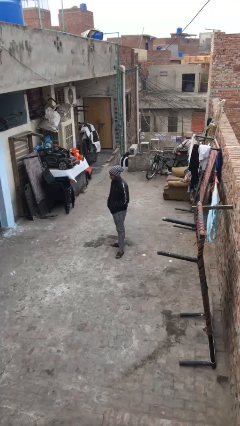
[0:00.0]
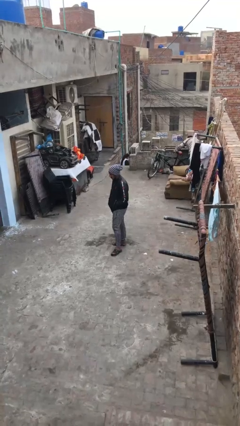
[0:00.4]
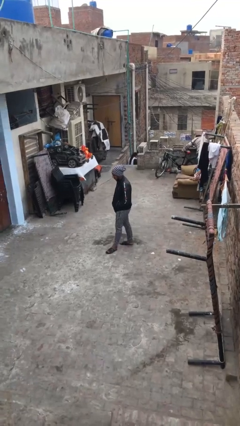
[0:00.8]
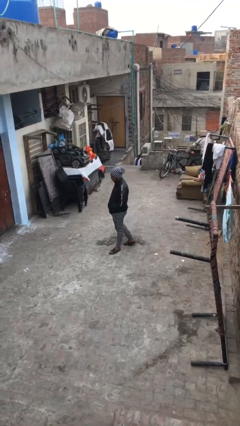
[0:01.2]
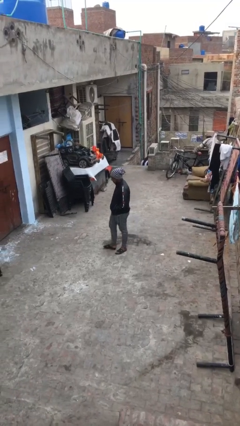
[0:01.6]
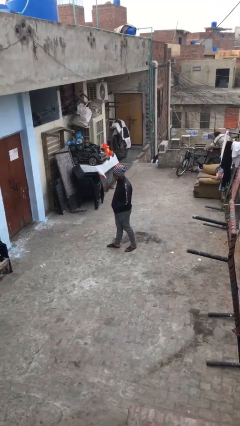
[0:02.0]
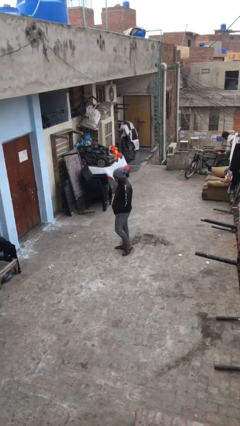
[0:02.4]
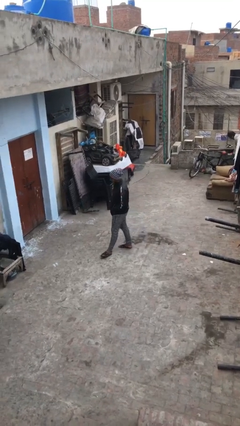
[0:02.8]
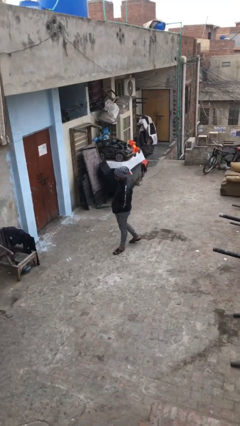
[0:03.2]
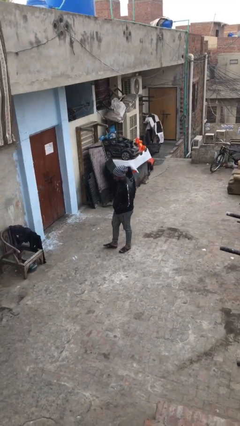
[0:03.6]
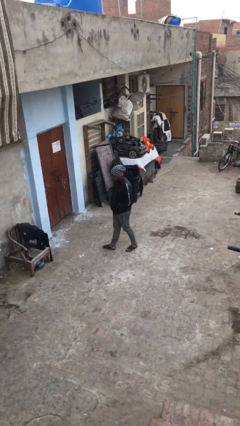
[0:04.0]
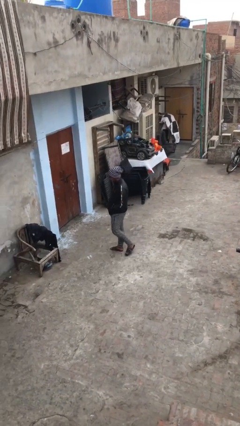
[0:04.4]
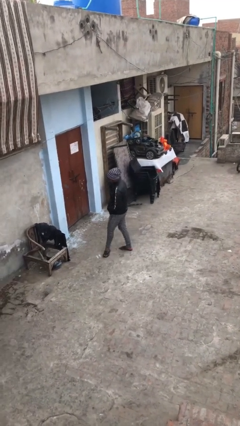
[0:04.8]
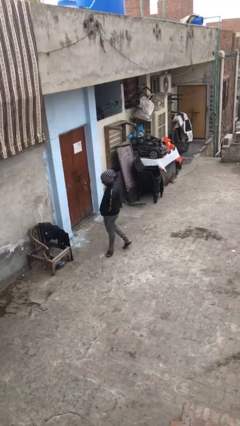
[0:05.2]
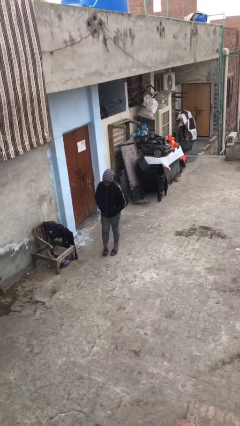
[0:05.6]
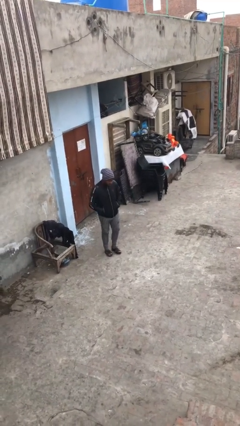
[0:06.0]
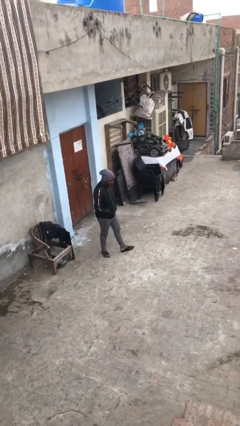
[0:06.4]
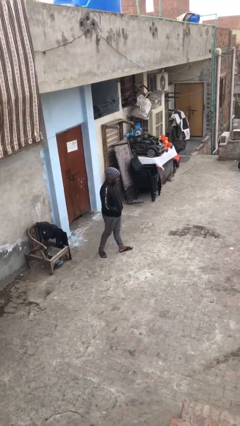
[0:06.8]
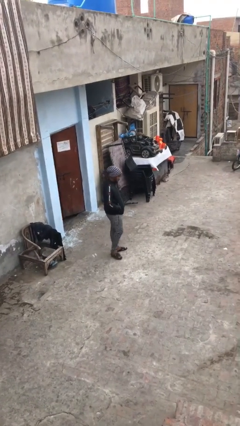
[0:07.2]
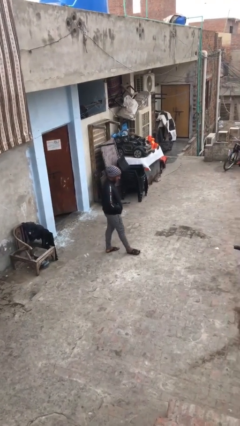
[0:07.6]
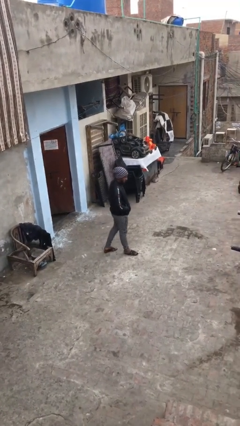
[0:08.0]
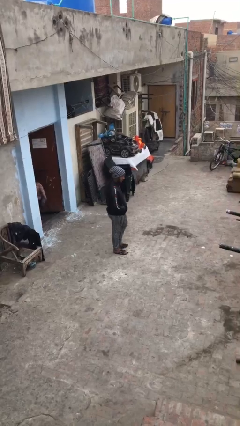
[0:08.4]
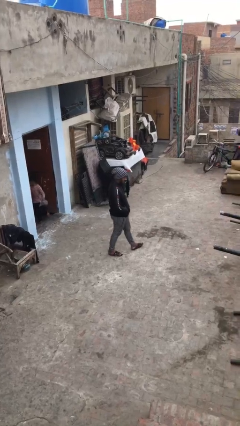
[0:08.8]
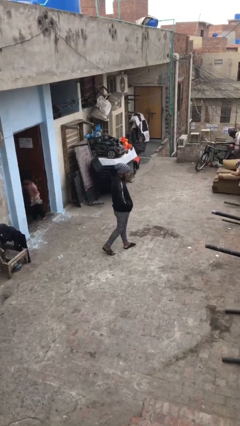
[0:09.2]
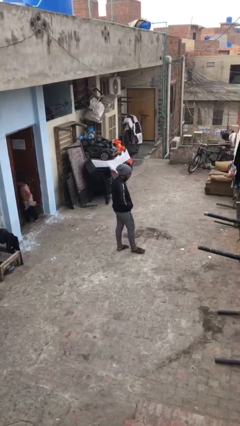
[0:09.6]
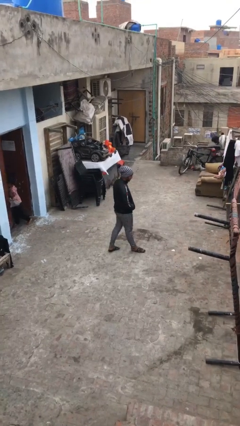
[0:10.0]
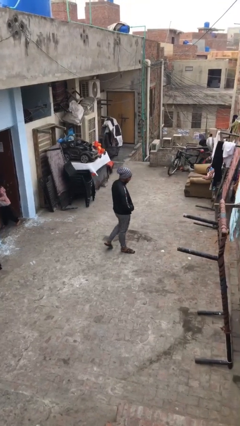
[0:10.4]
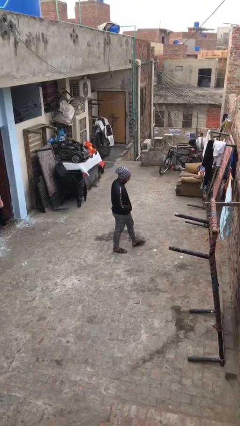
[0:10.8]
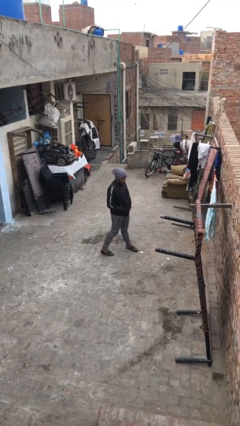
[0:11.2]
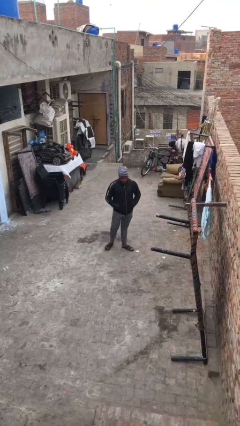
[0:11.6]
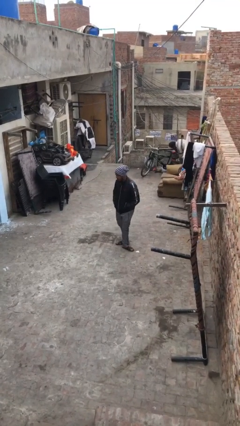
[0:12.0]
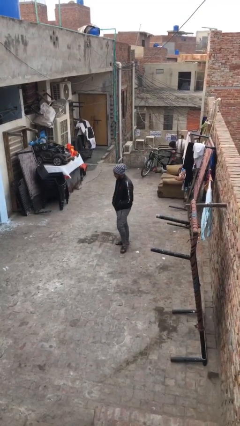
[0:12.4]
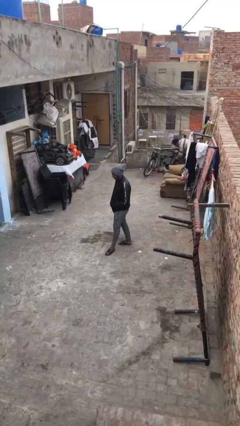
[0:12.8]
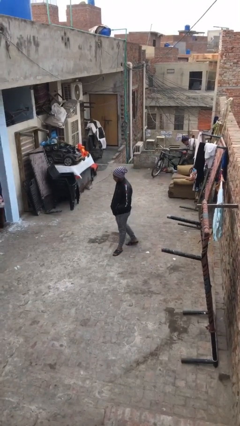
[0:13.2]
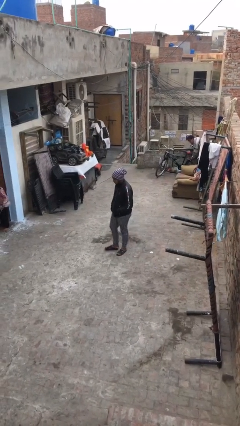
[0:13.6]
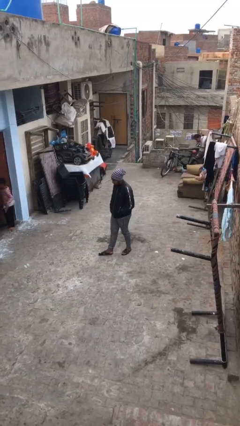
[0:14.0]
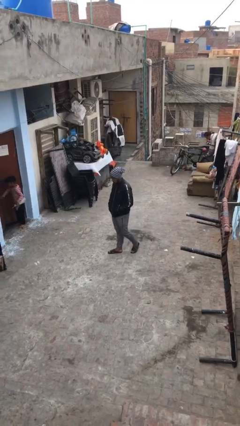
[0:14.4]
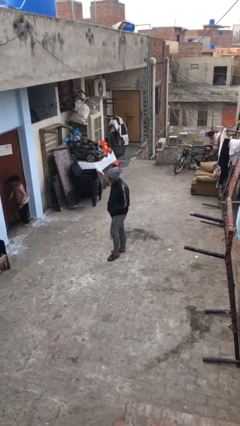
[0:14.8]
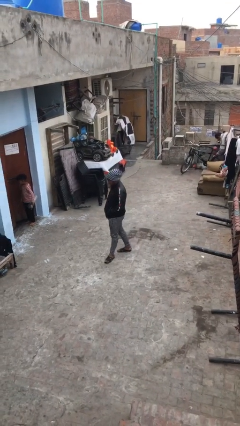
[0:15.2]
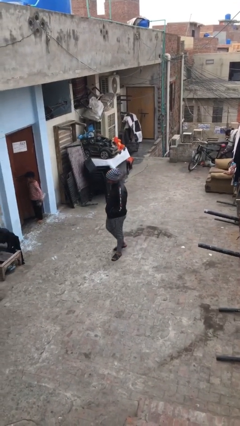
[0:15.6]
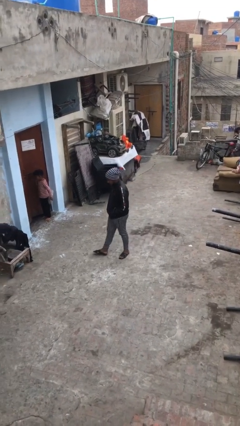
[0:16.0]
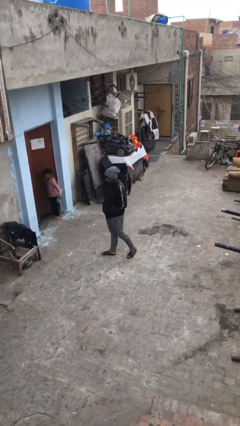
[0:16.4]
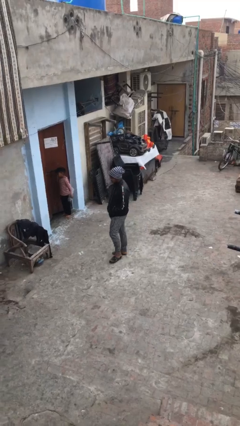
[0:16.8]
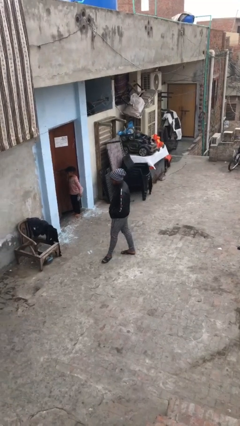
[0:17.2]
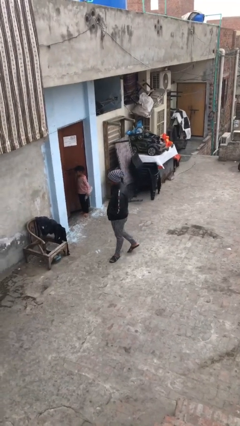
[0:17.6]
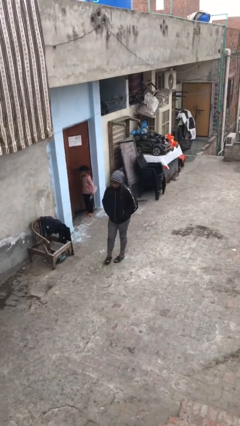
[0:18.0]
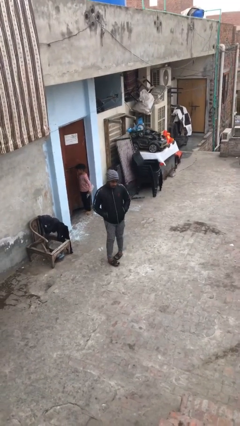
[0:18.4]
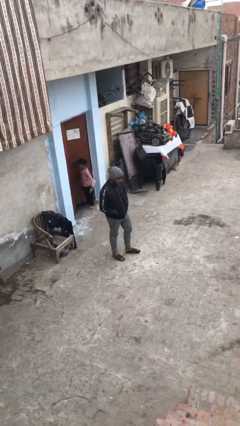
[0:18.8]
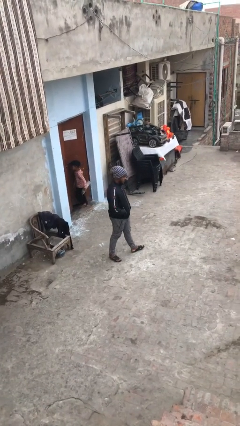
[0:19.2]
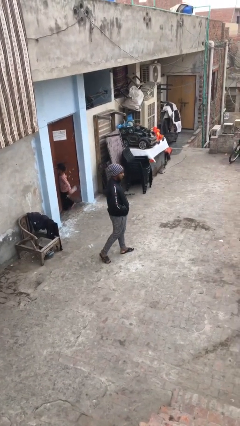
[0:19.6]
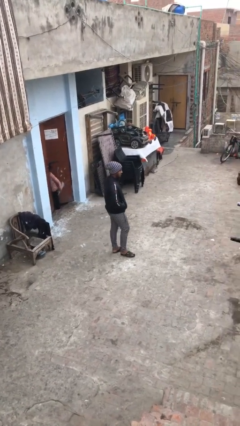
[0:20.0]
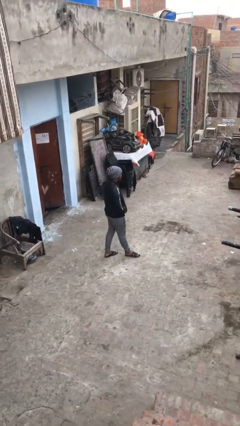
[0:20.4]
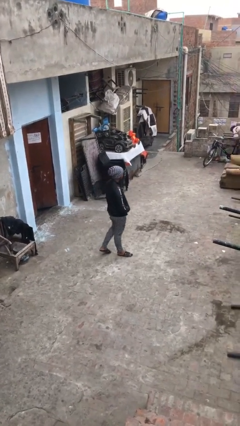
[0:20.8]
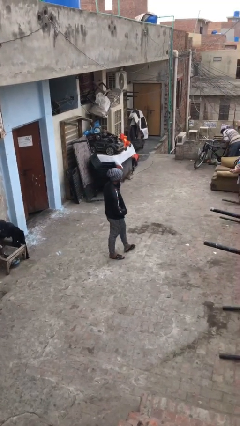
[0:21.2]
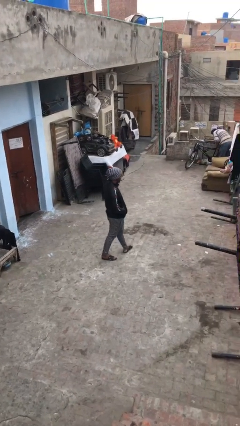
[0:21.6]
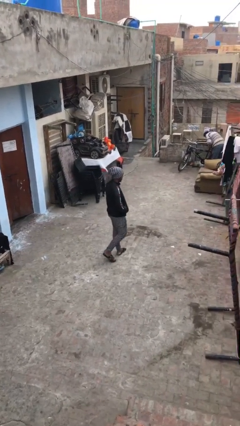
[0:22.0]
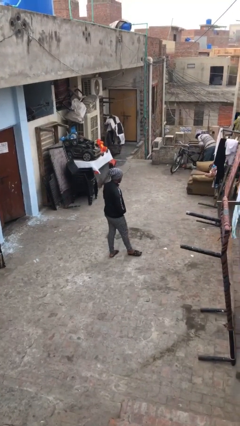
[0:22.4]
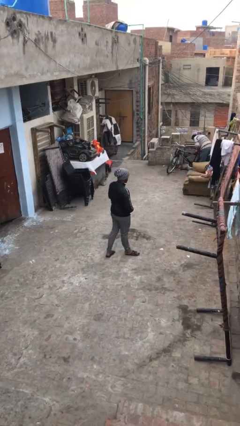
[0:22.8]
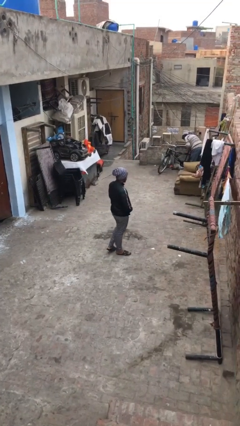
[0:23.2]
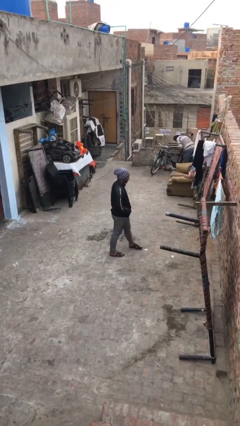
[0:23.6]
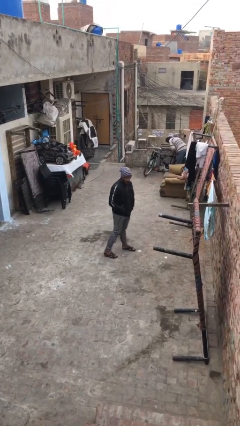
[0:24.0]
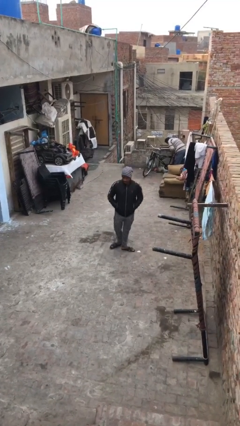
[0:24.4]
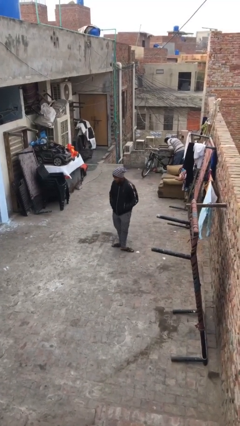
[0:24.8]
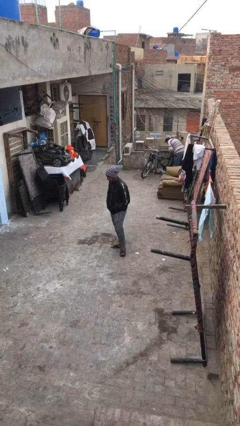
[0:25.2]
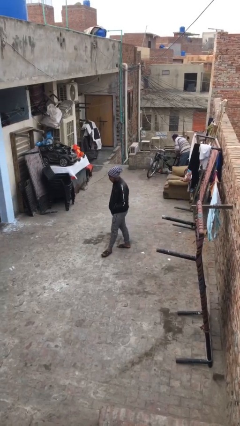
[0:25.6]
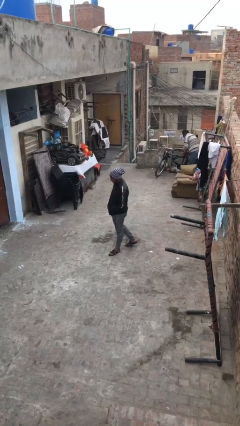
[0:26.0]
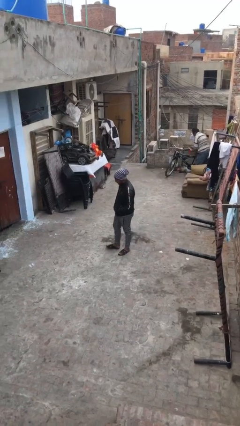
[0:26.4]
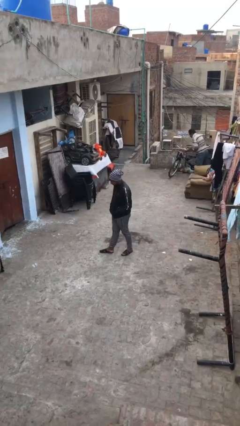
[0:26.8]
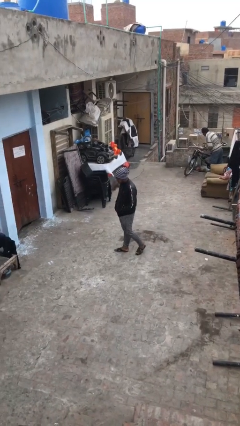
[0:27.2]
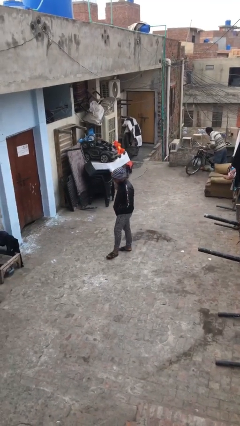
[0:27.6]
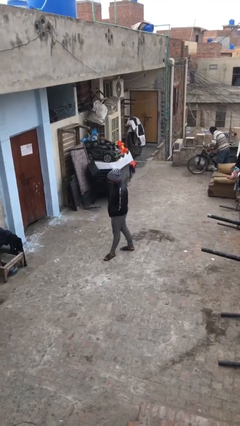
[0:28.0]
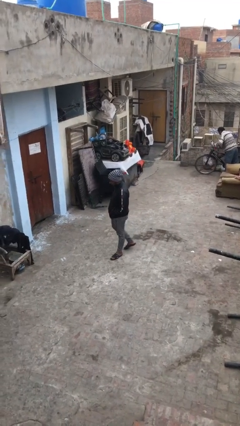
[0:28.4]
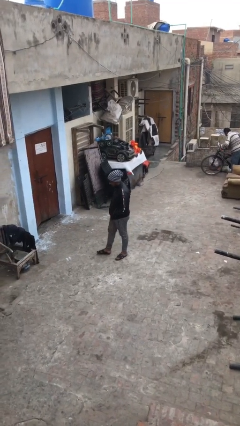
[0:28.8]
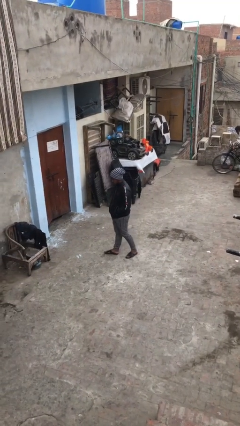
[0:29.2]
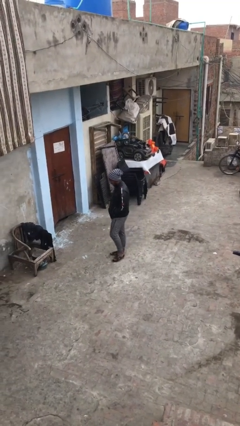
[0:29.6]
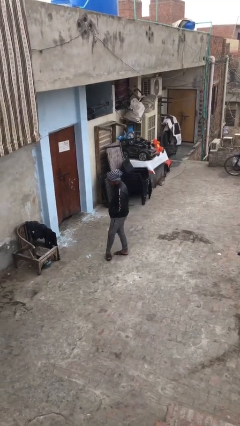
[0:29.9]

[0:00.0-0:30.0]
person walks

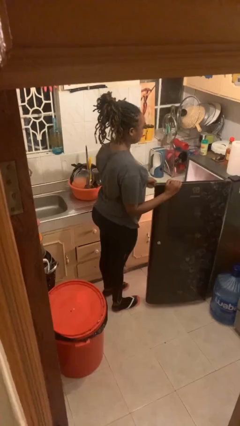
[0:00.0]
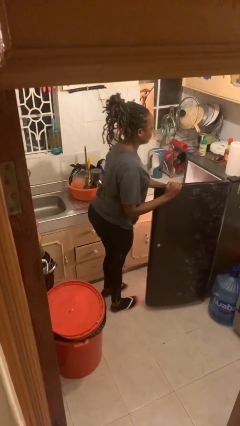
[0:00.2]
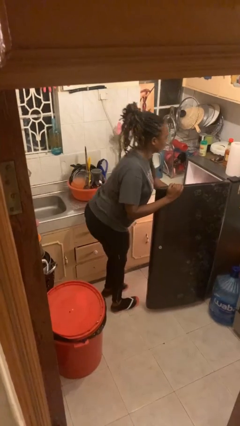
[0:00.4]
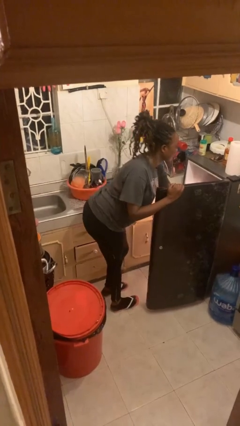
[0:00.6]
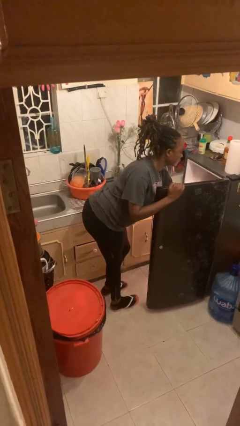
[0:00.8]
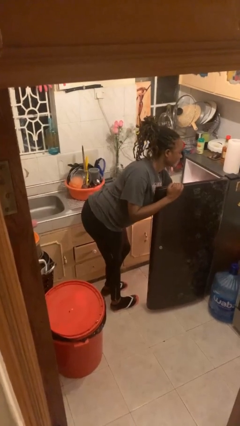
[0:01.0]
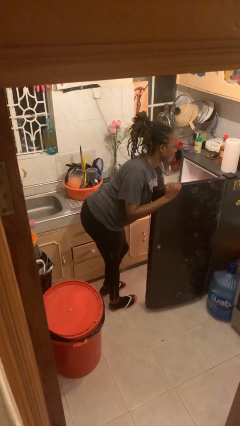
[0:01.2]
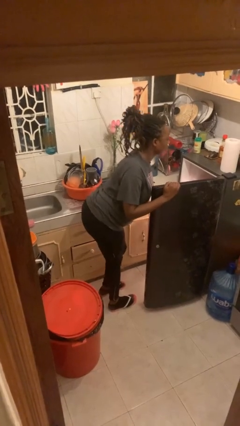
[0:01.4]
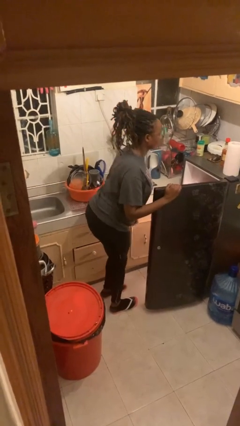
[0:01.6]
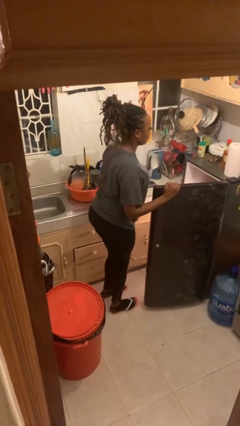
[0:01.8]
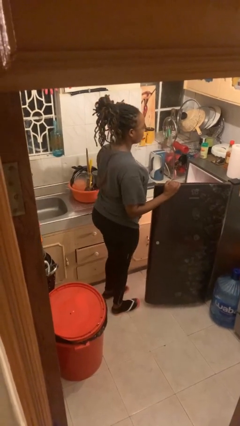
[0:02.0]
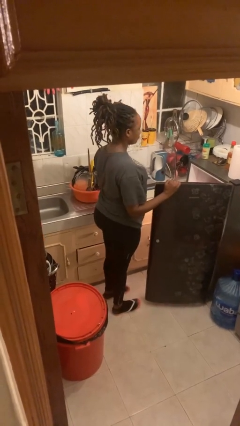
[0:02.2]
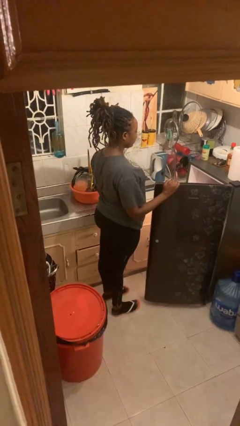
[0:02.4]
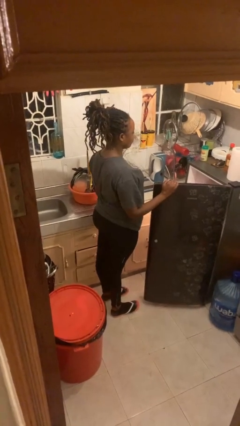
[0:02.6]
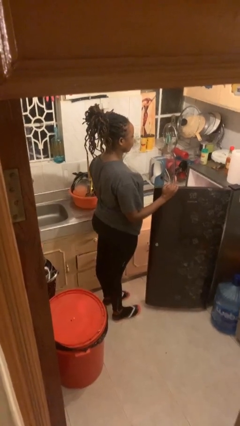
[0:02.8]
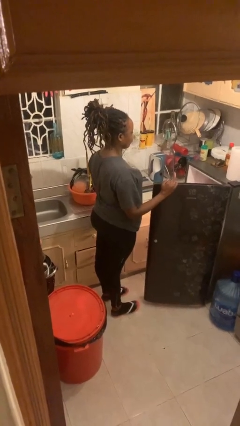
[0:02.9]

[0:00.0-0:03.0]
person puts object into refrigerator

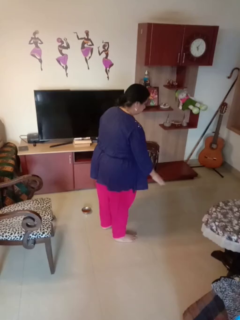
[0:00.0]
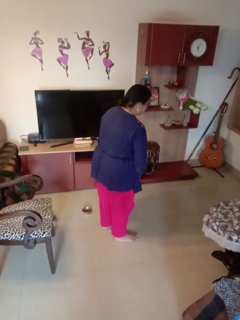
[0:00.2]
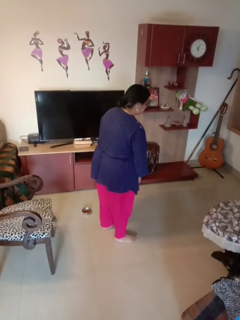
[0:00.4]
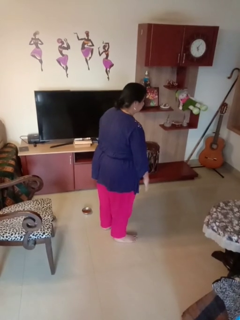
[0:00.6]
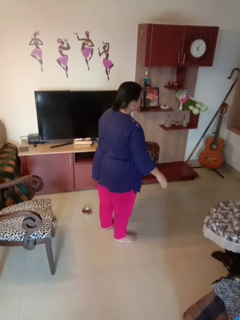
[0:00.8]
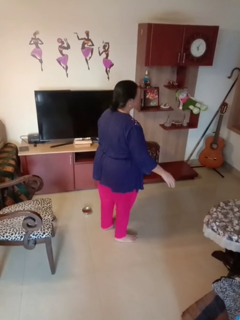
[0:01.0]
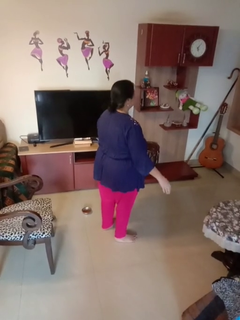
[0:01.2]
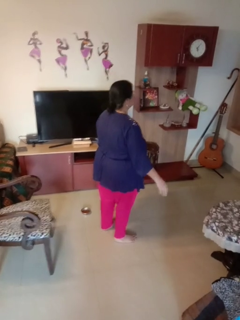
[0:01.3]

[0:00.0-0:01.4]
person slaps hands on thighs
